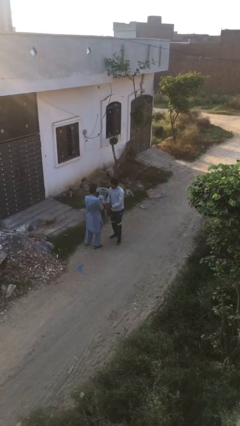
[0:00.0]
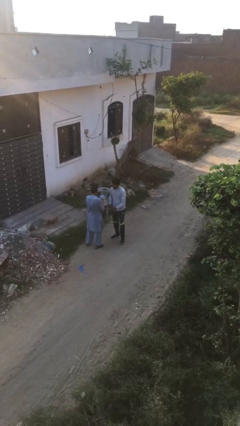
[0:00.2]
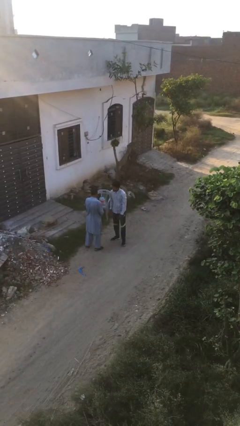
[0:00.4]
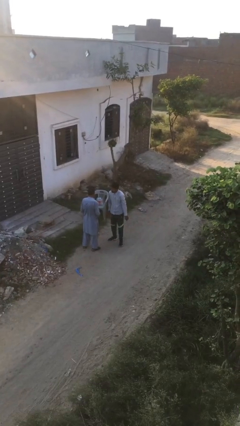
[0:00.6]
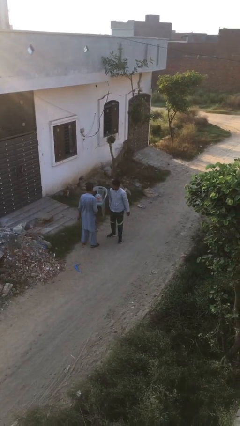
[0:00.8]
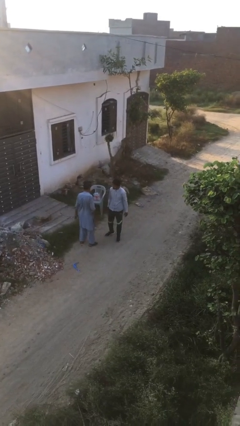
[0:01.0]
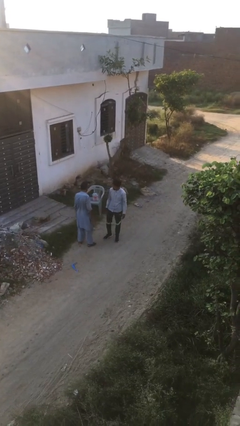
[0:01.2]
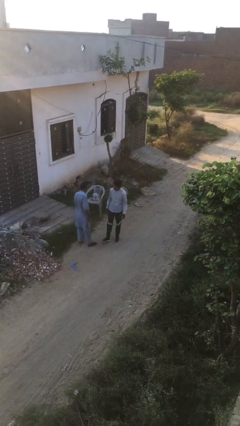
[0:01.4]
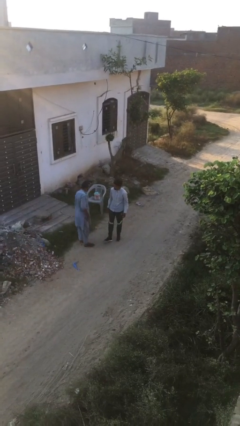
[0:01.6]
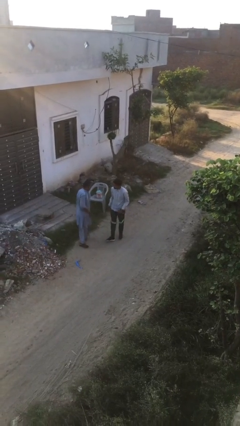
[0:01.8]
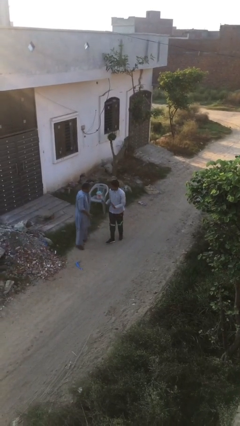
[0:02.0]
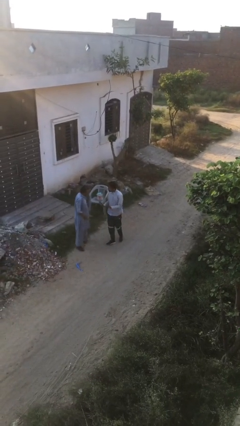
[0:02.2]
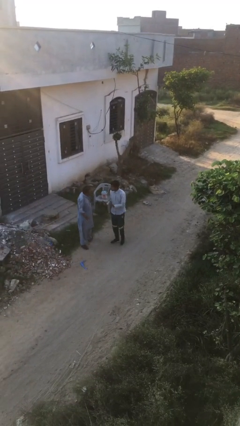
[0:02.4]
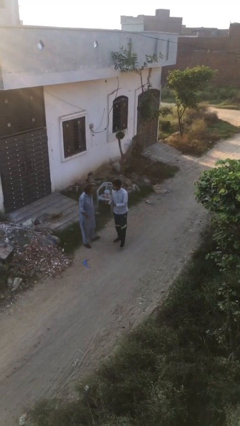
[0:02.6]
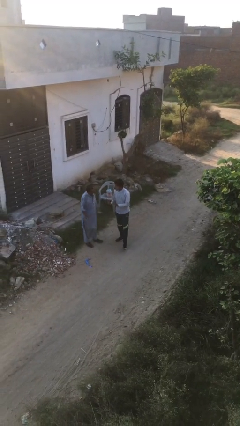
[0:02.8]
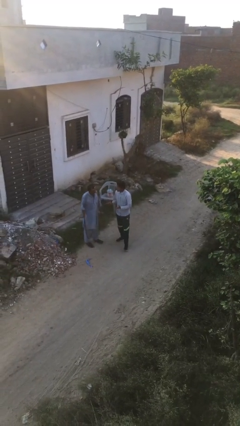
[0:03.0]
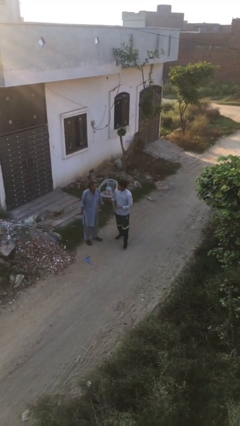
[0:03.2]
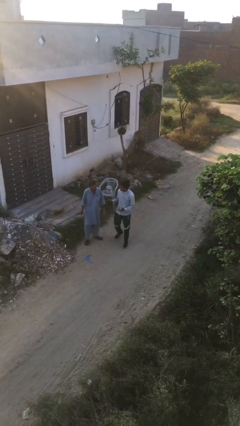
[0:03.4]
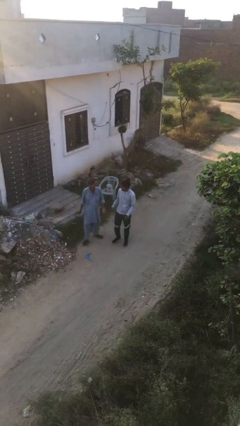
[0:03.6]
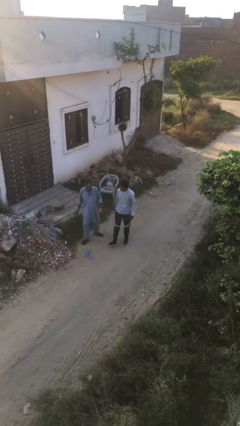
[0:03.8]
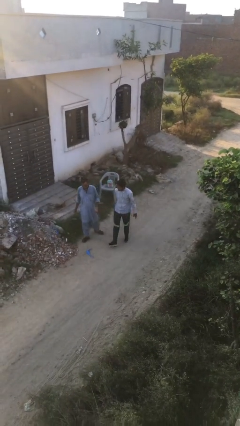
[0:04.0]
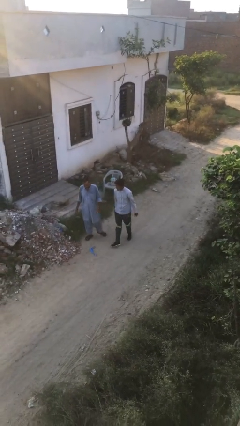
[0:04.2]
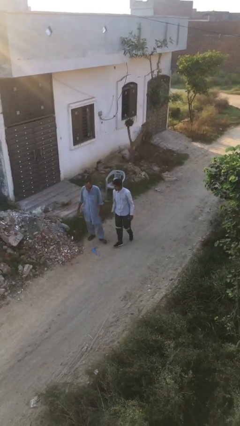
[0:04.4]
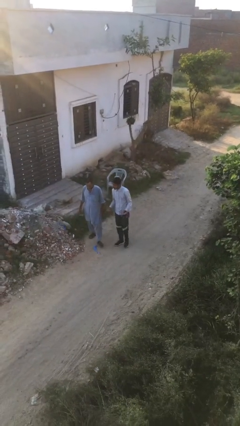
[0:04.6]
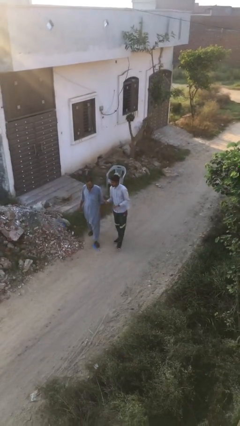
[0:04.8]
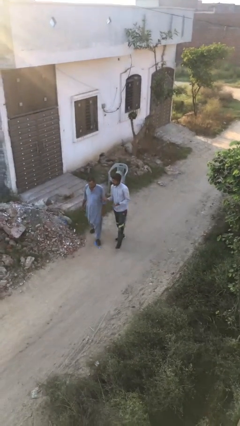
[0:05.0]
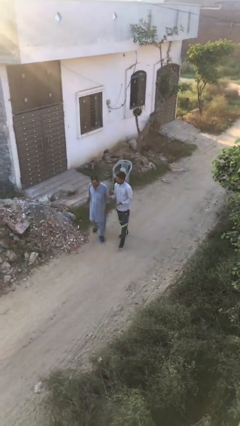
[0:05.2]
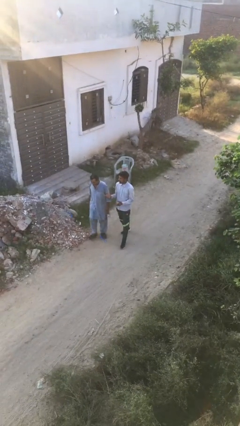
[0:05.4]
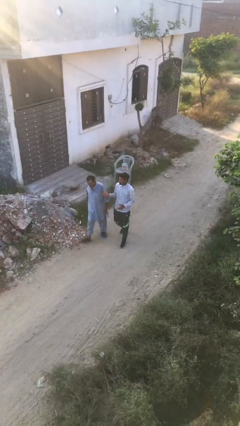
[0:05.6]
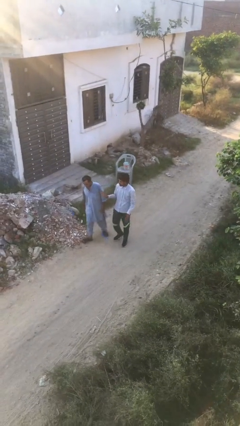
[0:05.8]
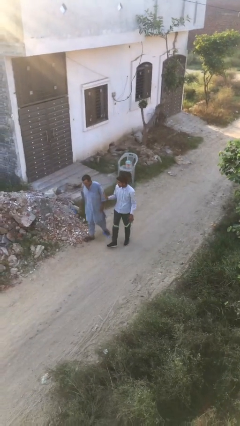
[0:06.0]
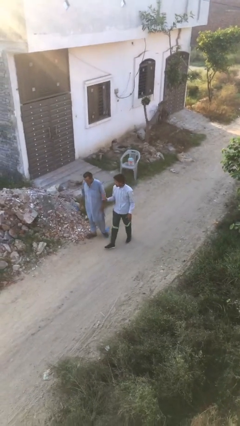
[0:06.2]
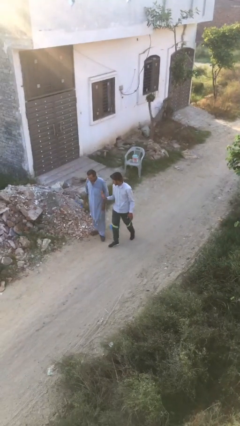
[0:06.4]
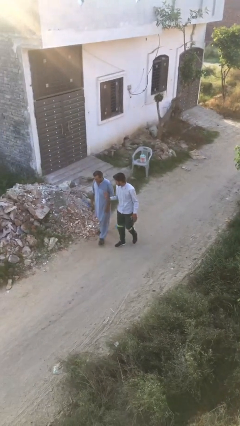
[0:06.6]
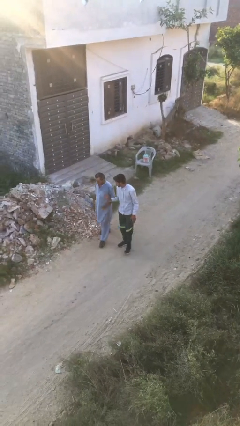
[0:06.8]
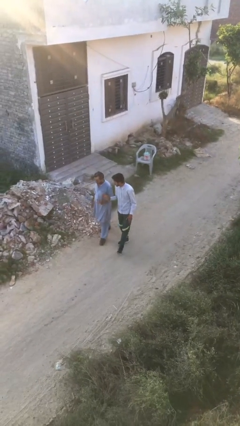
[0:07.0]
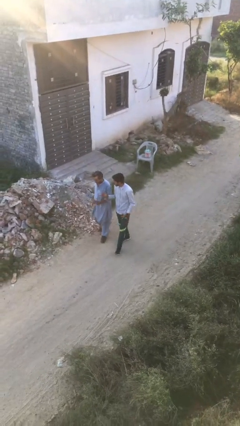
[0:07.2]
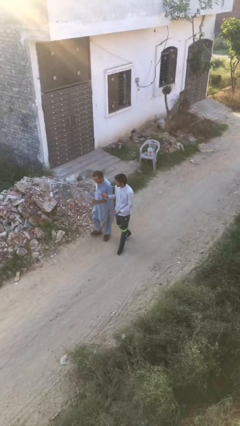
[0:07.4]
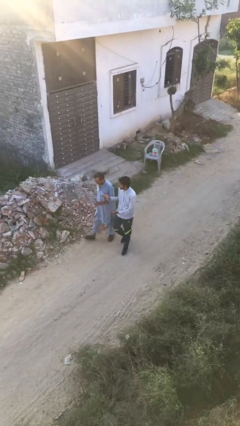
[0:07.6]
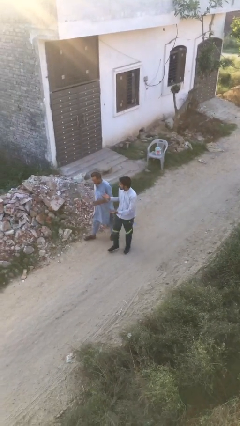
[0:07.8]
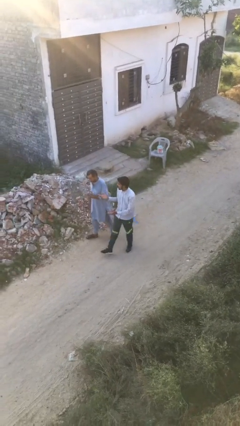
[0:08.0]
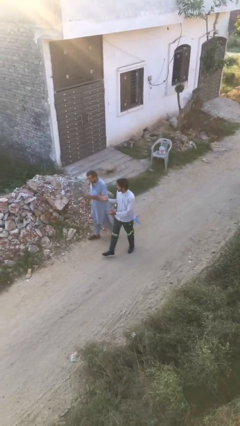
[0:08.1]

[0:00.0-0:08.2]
person talks to person

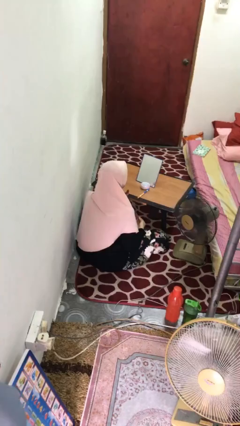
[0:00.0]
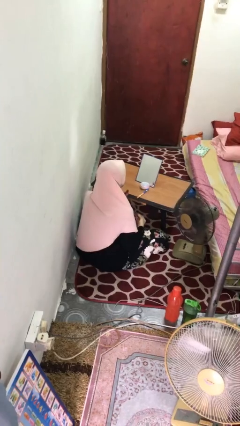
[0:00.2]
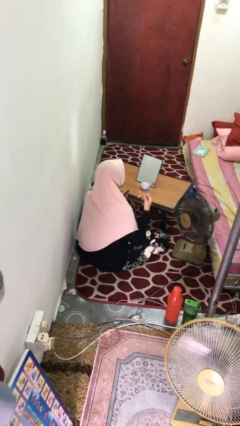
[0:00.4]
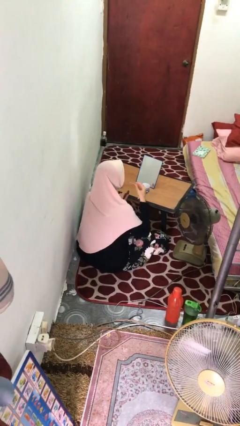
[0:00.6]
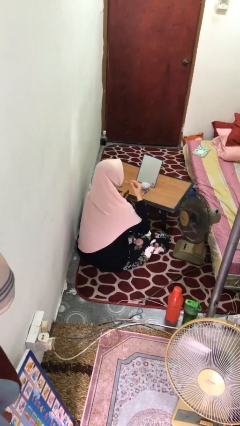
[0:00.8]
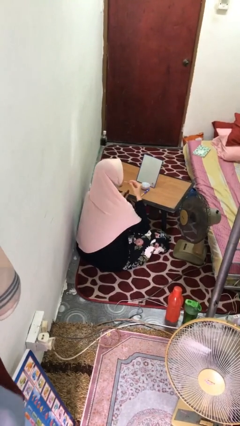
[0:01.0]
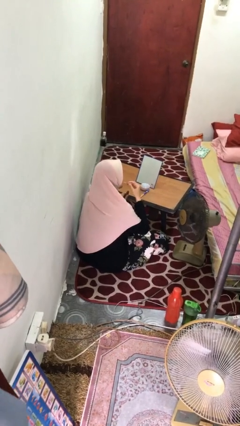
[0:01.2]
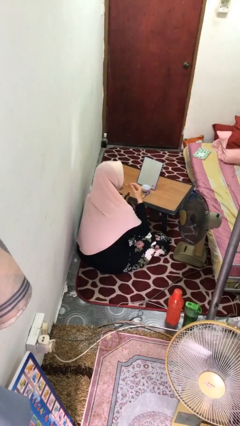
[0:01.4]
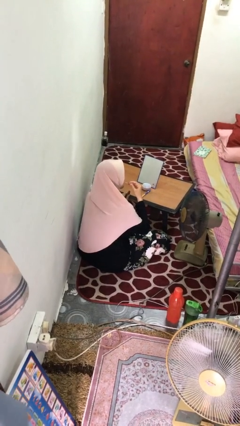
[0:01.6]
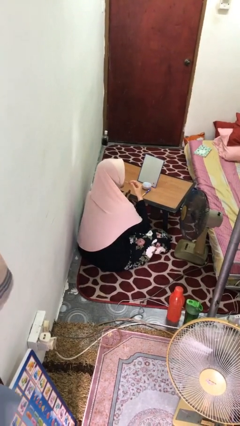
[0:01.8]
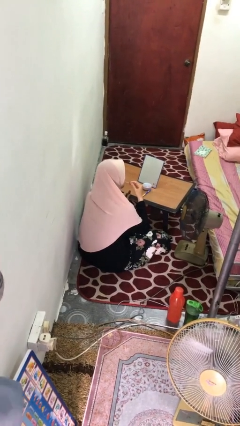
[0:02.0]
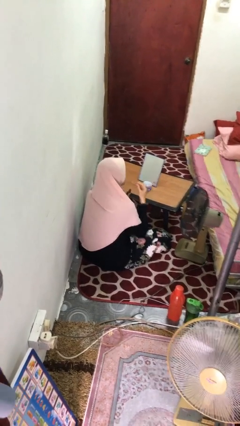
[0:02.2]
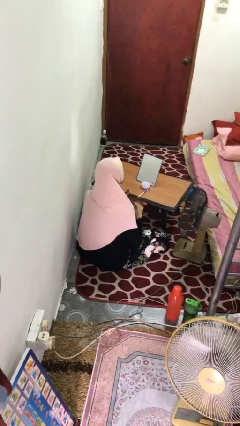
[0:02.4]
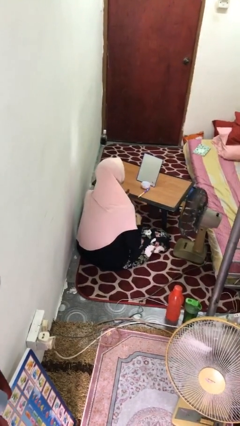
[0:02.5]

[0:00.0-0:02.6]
person applies lip makeup

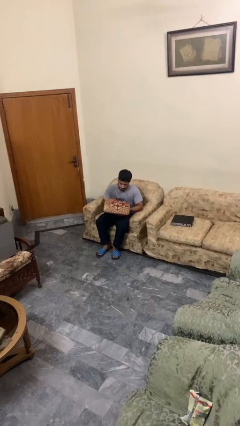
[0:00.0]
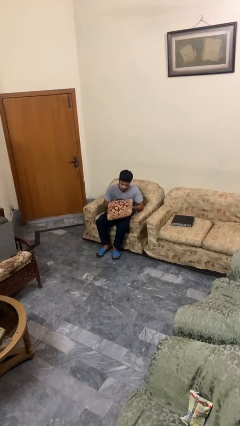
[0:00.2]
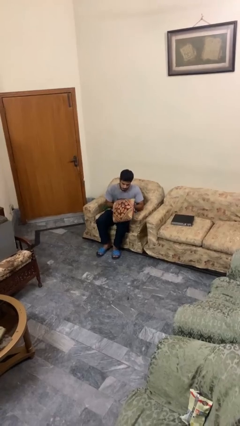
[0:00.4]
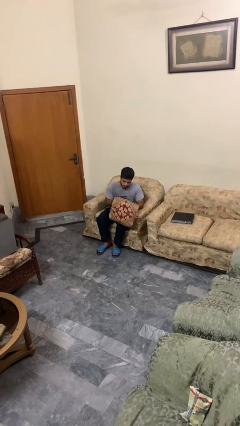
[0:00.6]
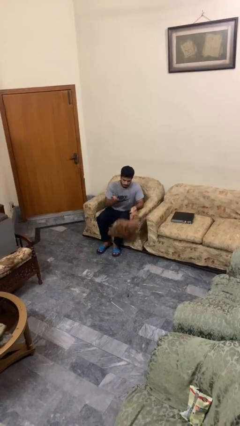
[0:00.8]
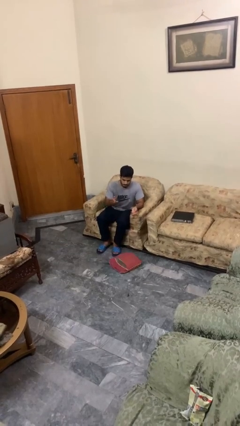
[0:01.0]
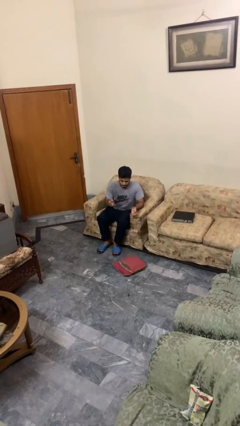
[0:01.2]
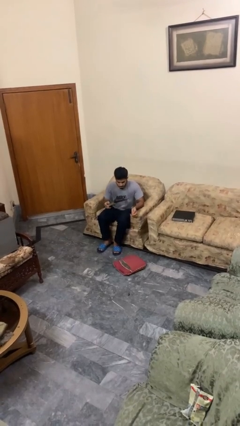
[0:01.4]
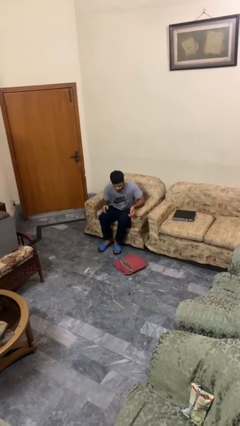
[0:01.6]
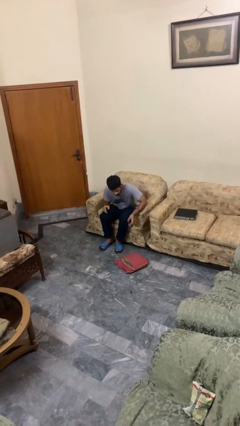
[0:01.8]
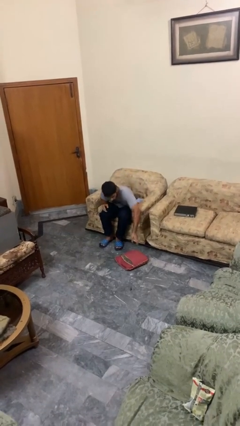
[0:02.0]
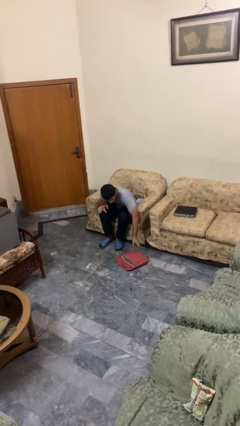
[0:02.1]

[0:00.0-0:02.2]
person drops object

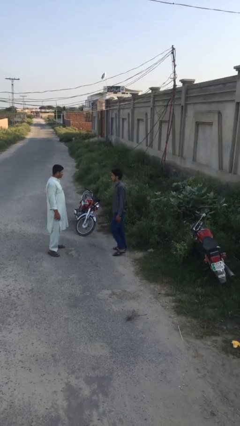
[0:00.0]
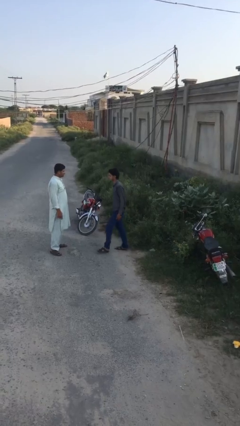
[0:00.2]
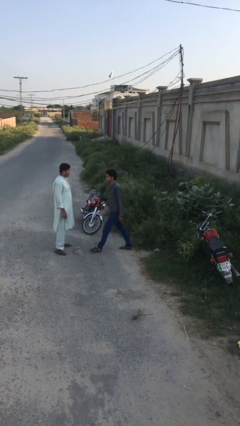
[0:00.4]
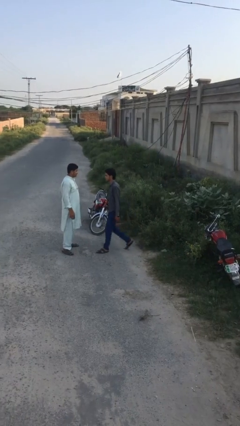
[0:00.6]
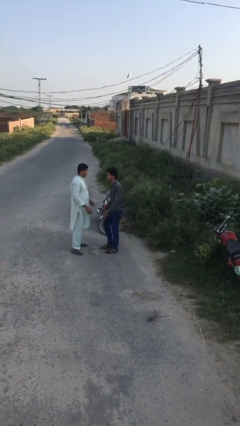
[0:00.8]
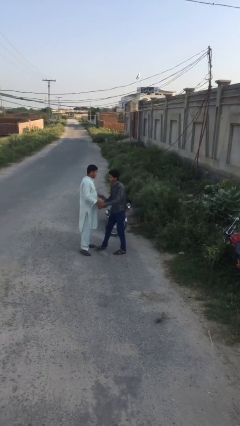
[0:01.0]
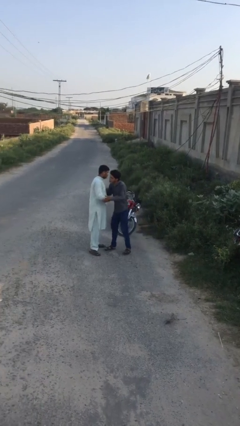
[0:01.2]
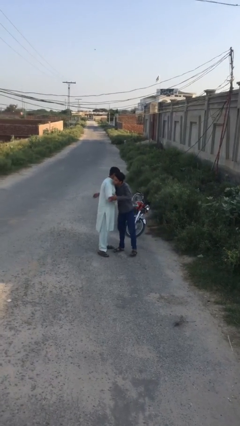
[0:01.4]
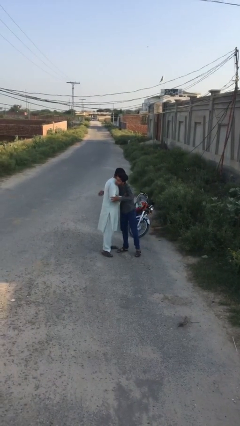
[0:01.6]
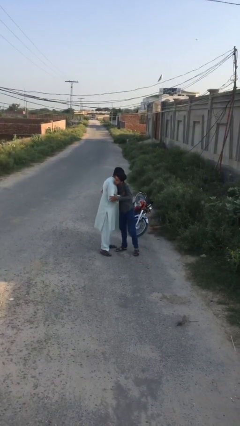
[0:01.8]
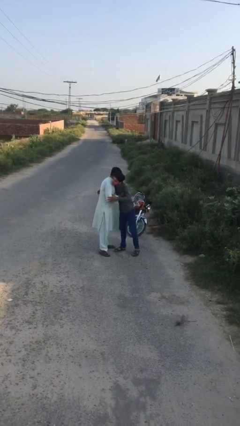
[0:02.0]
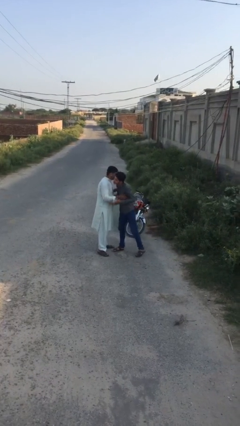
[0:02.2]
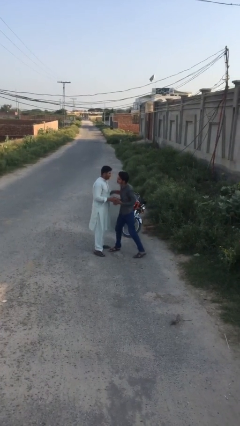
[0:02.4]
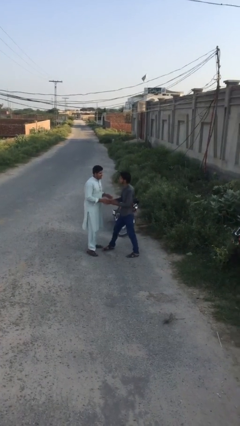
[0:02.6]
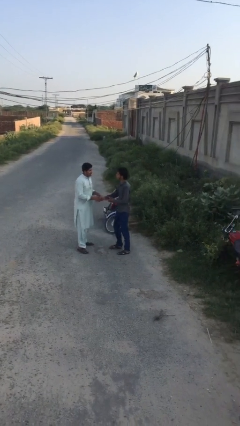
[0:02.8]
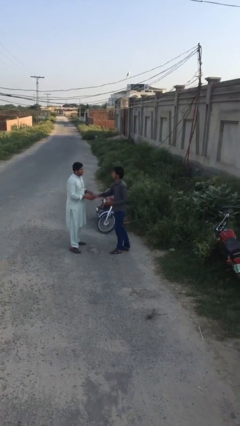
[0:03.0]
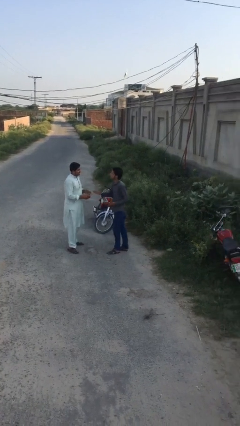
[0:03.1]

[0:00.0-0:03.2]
person embraces person

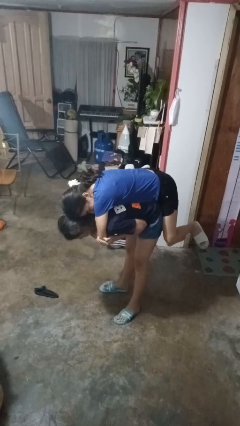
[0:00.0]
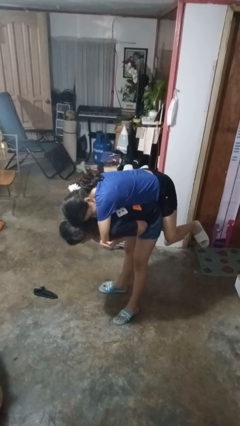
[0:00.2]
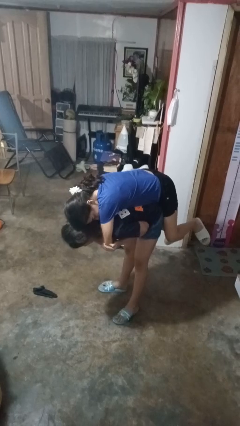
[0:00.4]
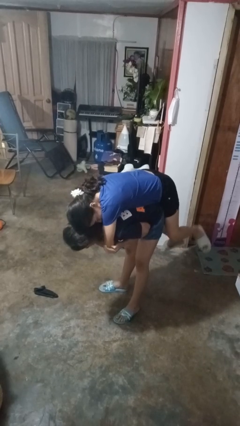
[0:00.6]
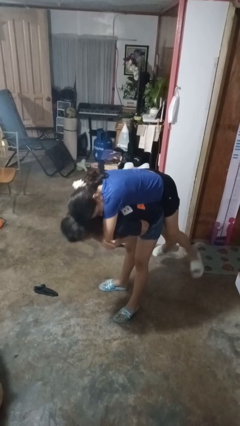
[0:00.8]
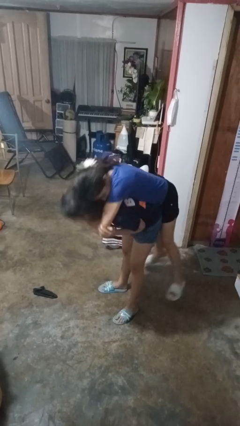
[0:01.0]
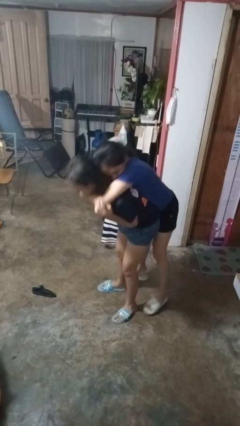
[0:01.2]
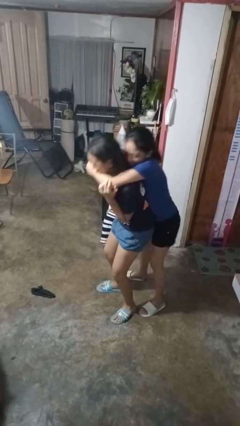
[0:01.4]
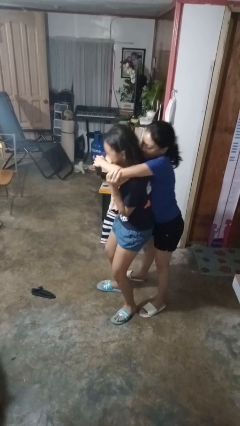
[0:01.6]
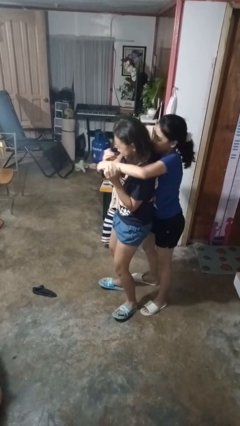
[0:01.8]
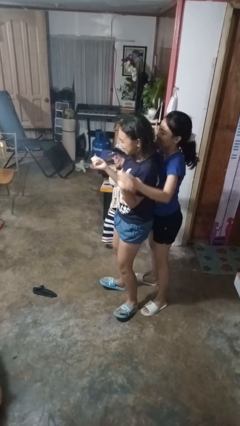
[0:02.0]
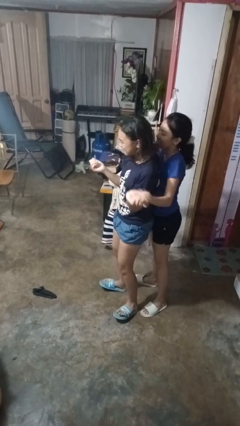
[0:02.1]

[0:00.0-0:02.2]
person puts down person
